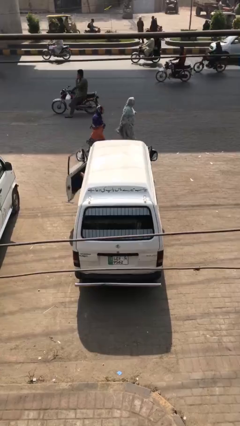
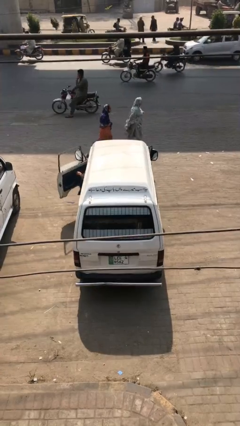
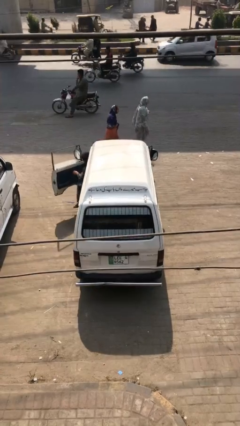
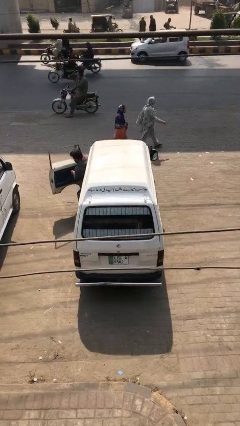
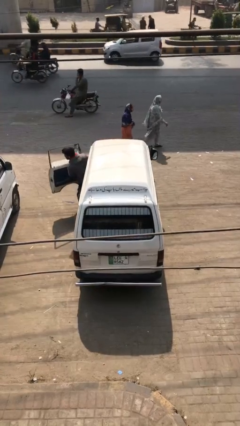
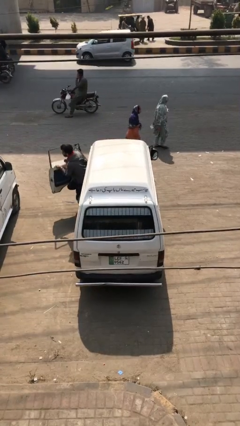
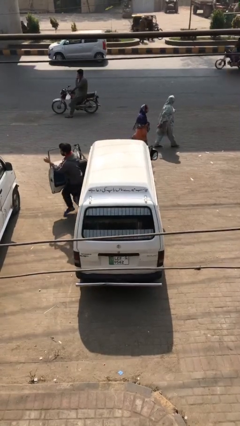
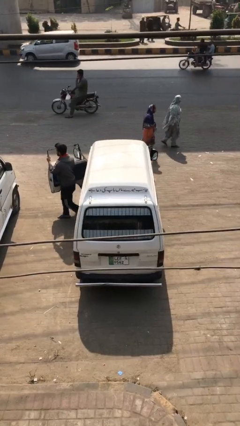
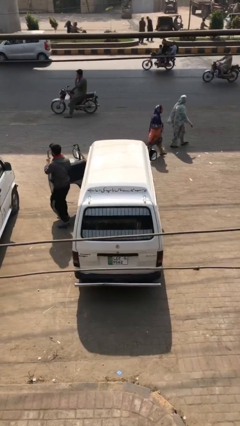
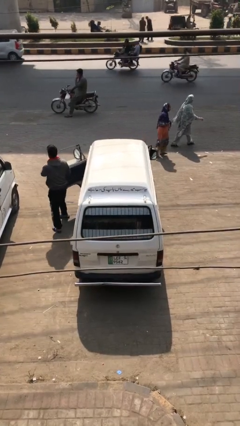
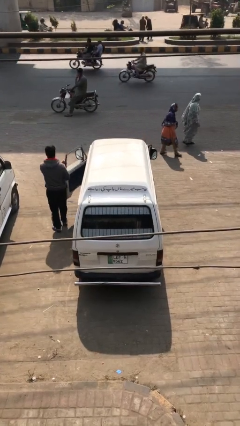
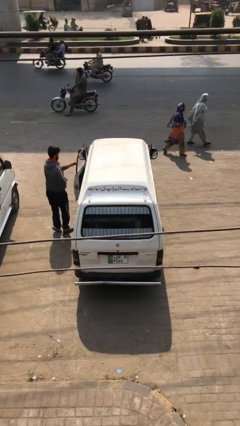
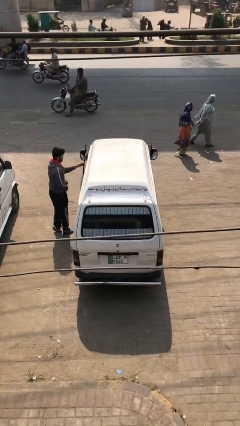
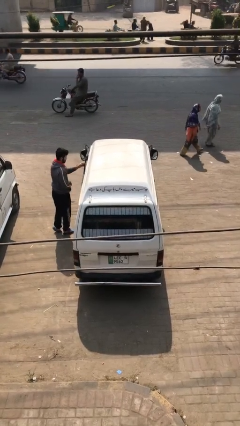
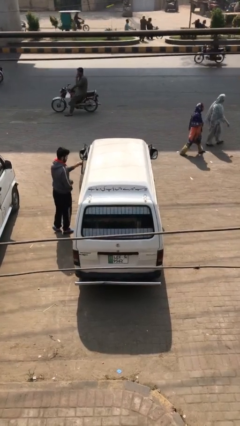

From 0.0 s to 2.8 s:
car drops off person

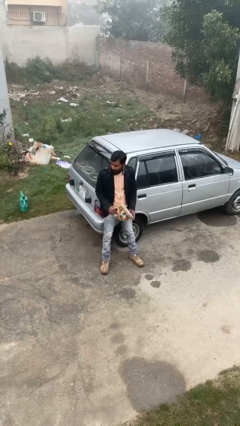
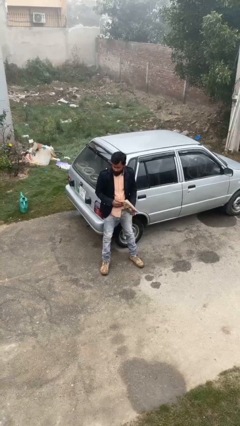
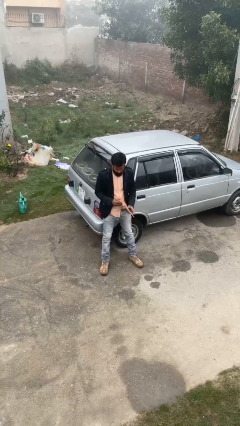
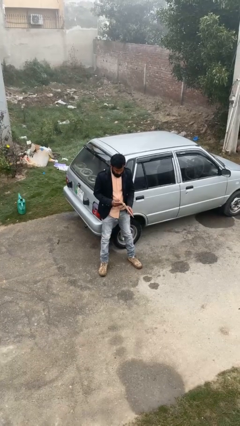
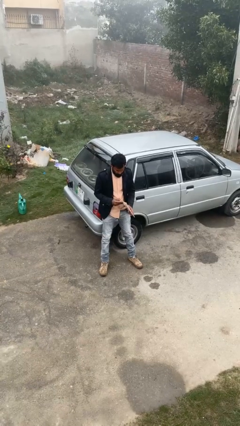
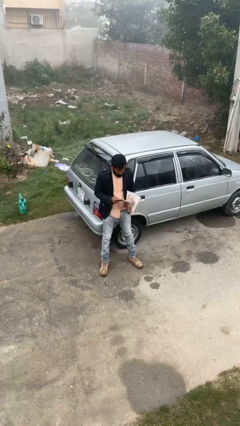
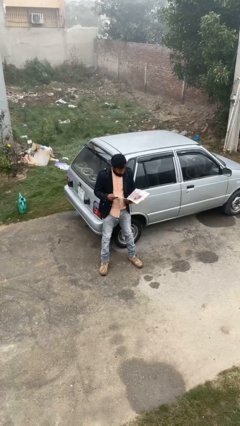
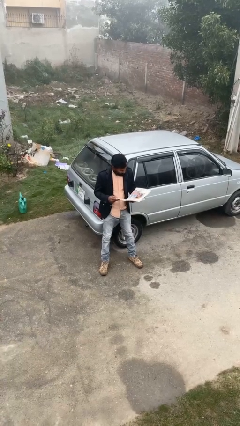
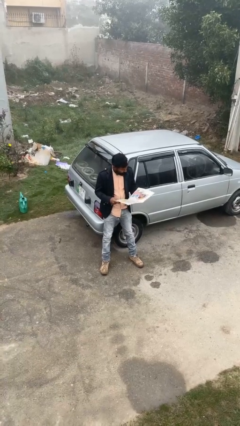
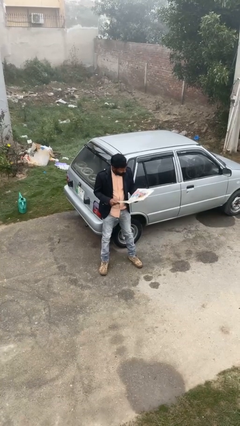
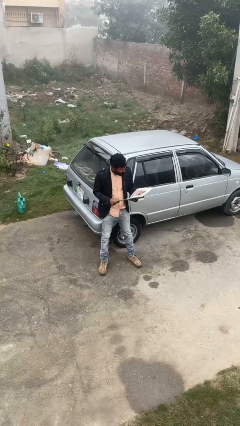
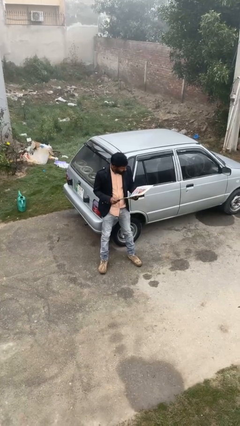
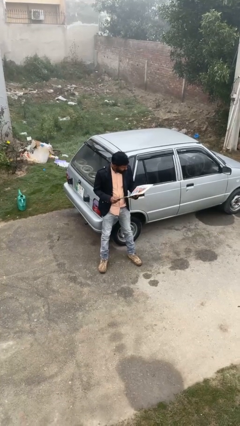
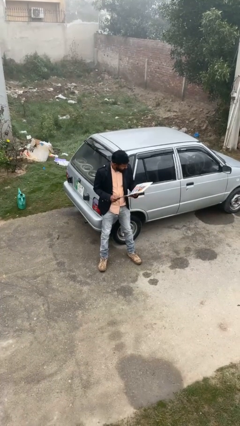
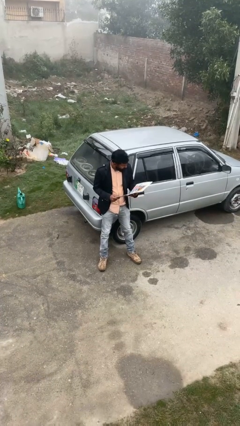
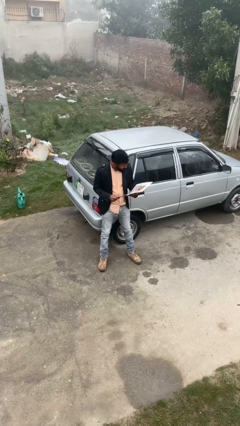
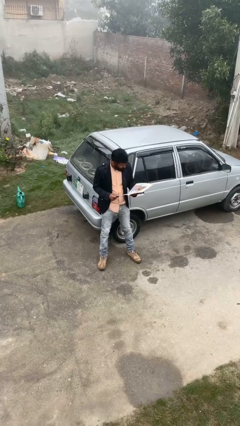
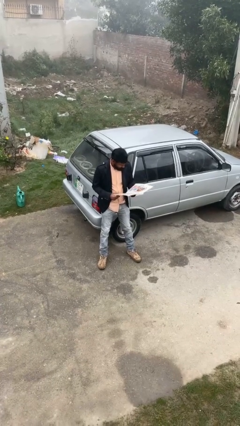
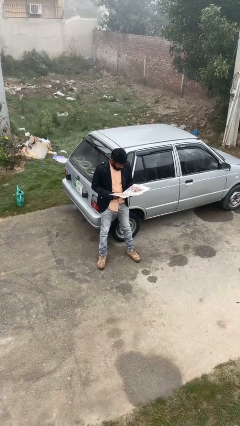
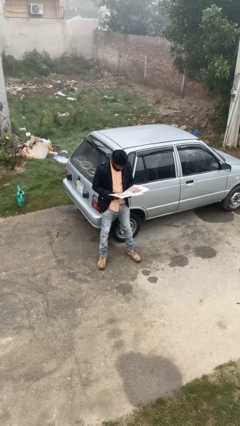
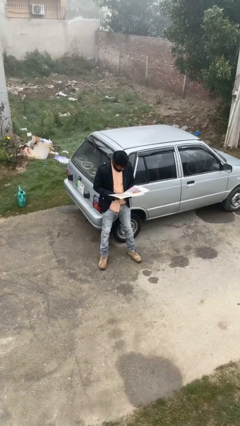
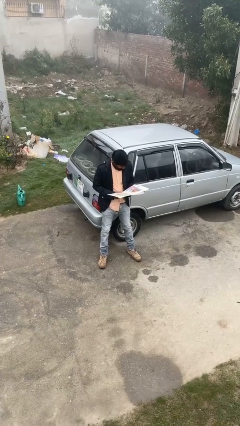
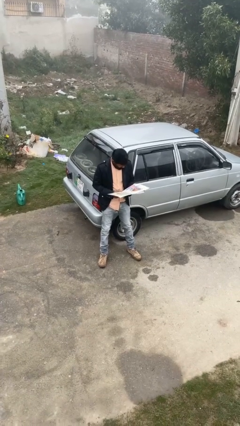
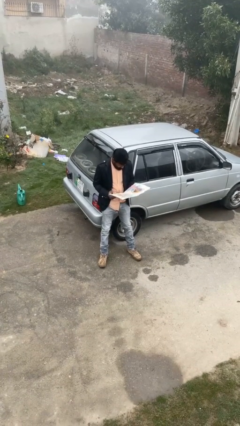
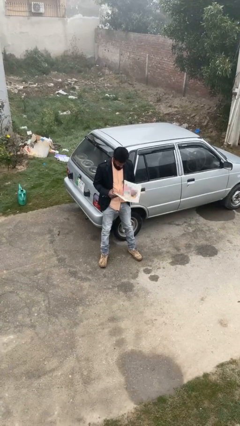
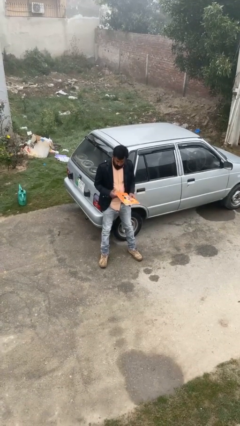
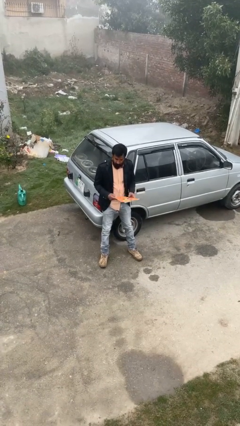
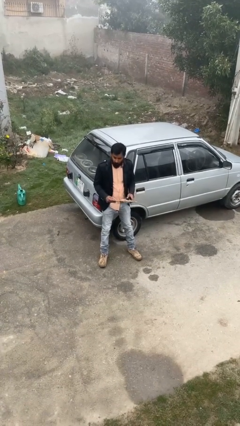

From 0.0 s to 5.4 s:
person reads document

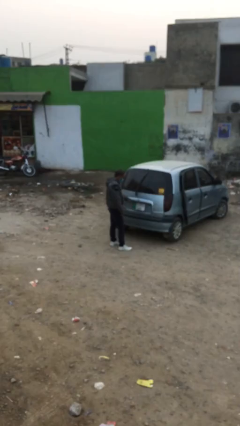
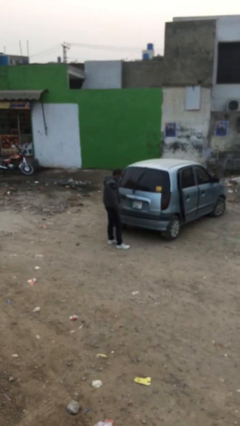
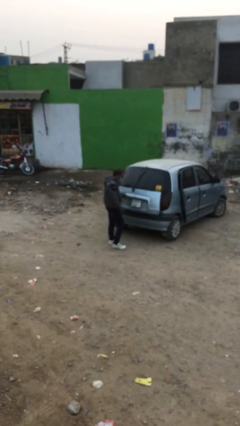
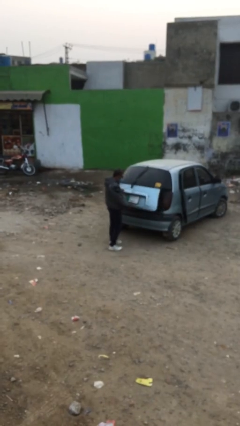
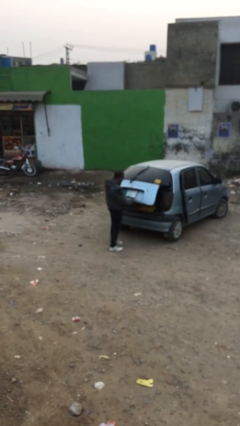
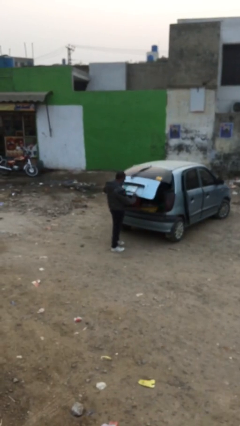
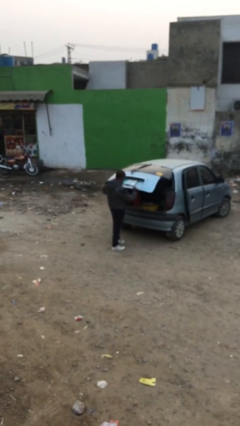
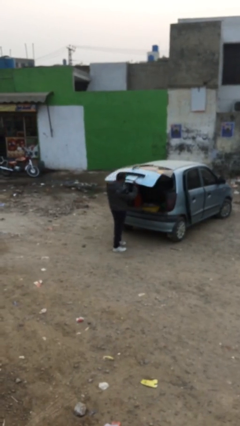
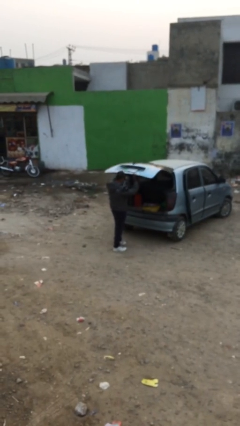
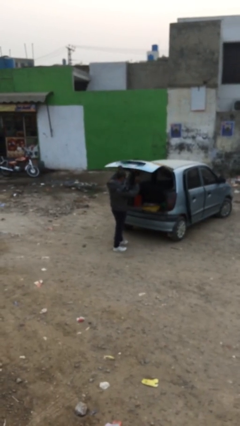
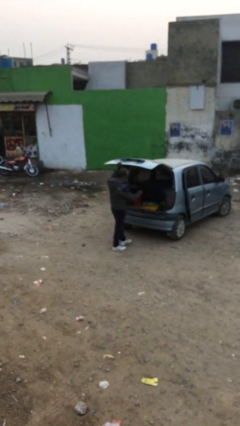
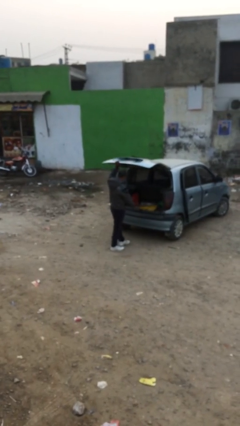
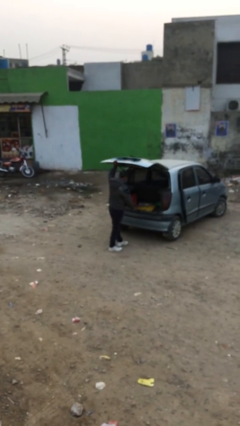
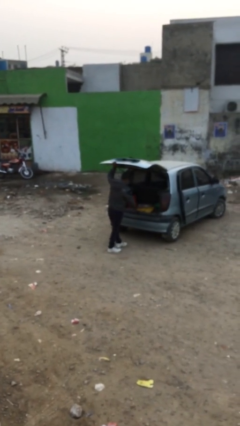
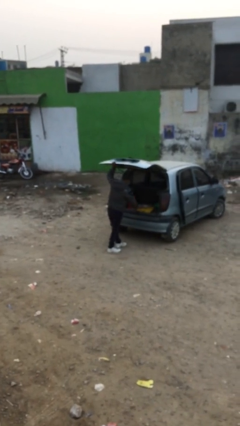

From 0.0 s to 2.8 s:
person opens car trunk

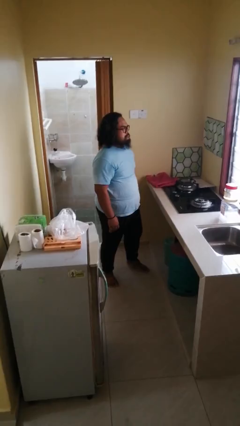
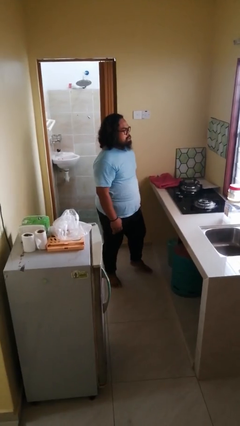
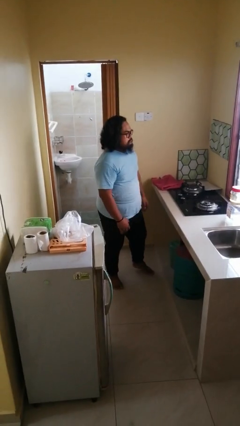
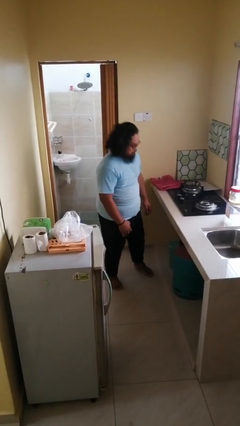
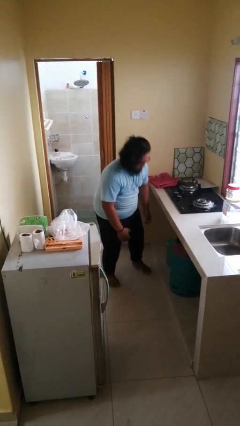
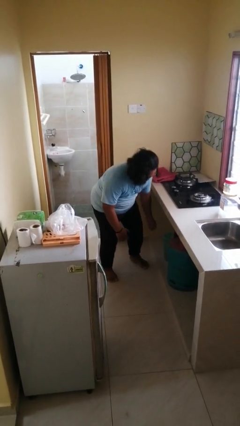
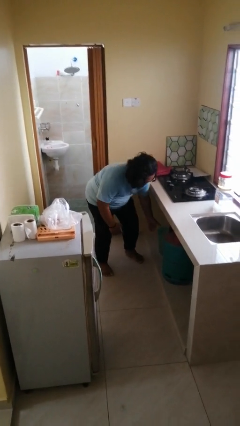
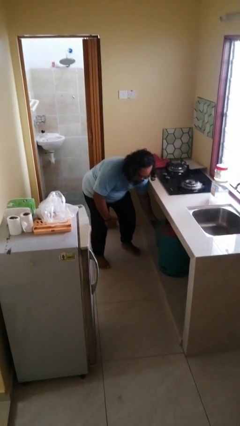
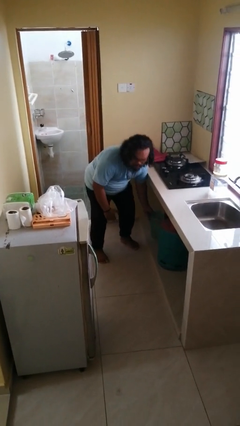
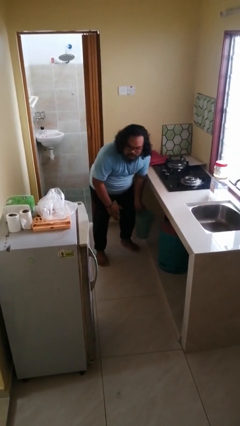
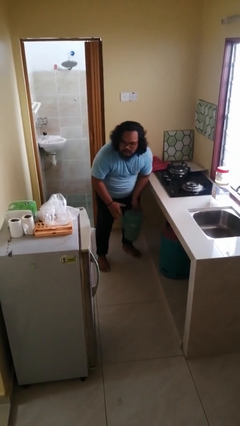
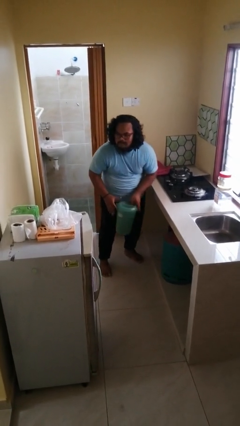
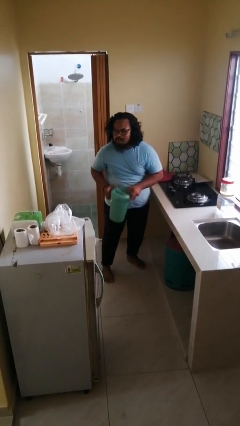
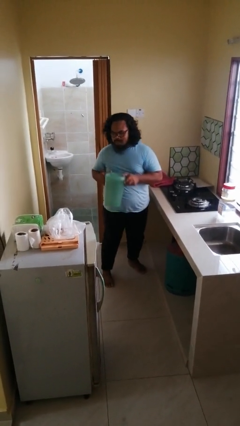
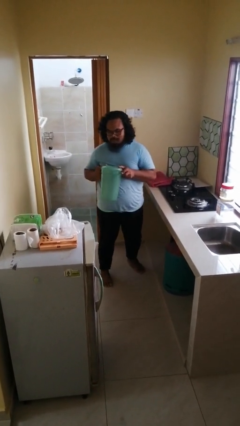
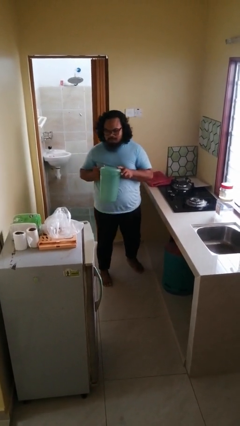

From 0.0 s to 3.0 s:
person picks up object from cabinet

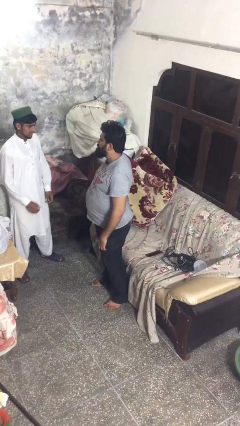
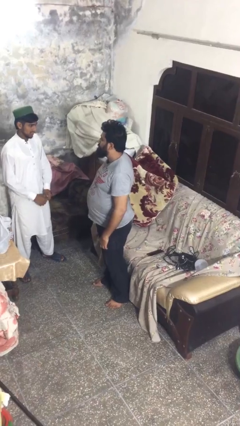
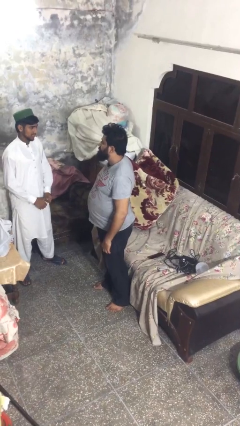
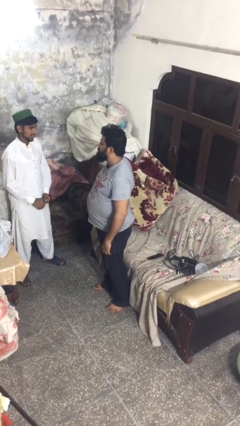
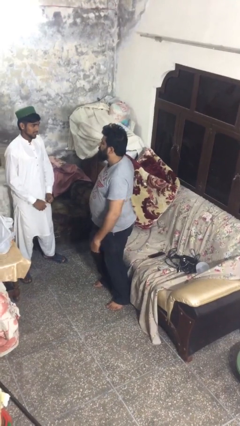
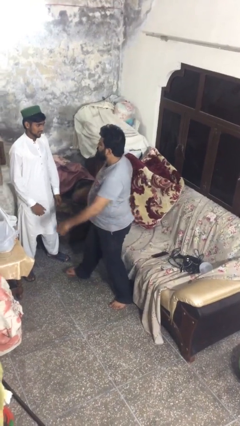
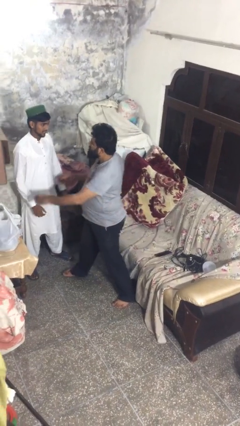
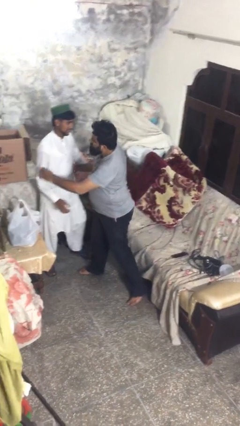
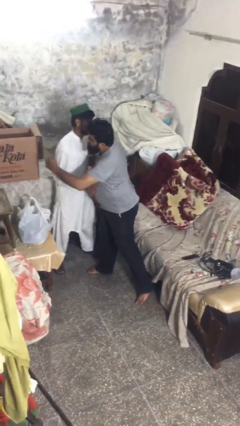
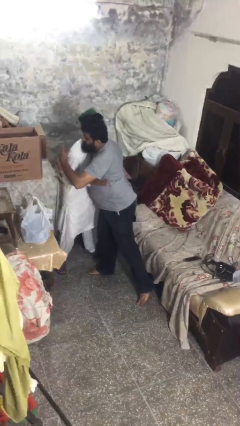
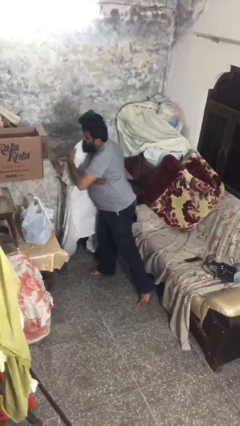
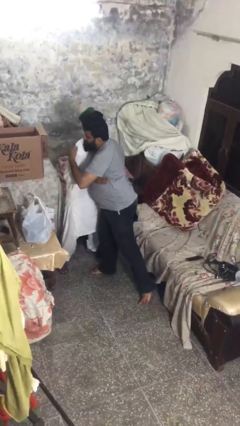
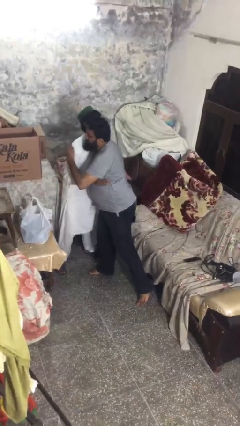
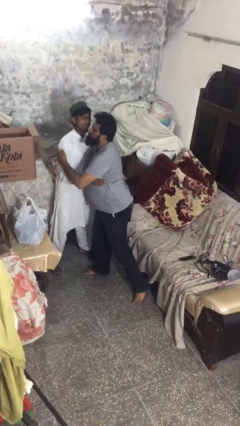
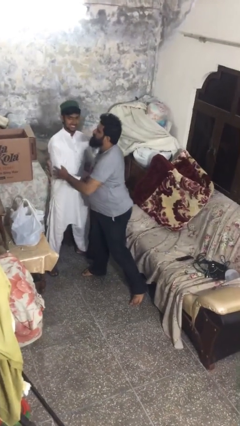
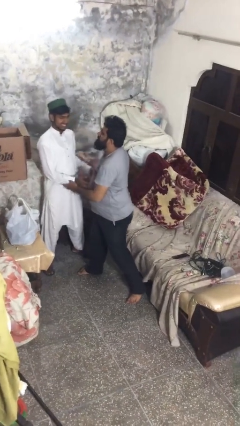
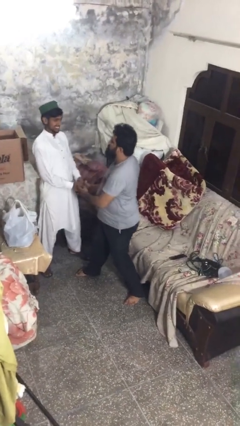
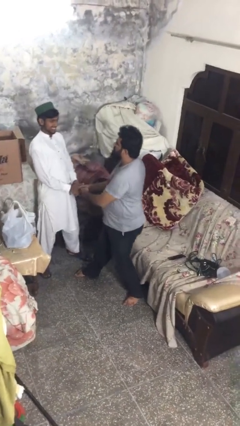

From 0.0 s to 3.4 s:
person embraces person
